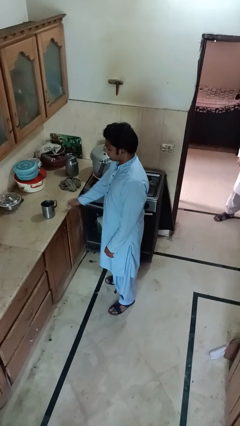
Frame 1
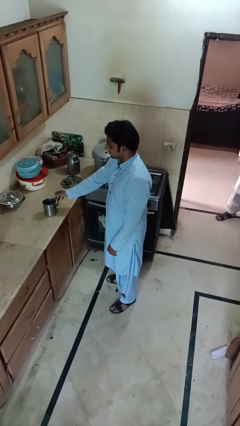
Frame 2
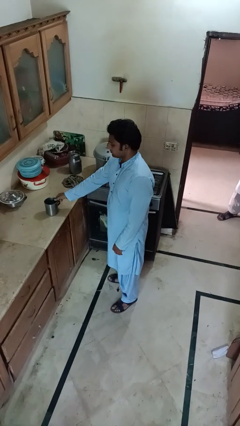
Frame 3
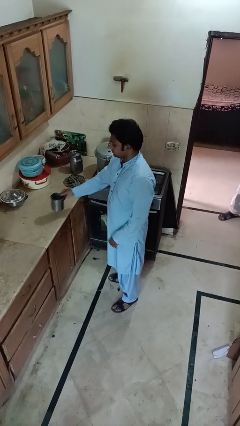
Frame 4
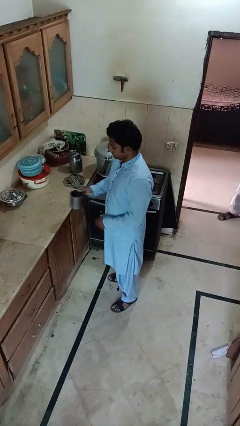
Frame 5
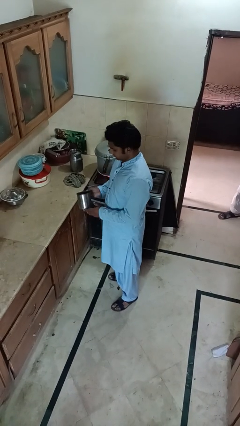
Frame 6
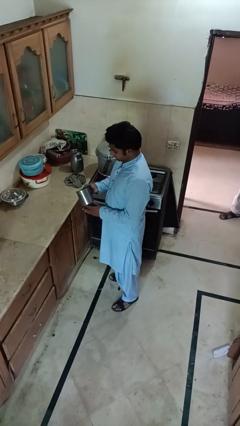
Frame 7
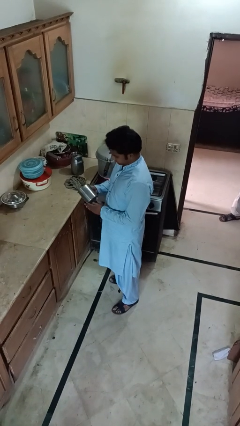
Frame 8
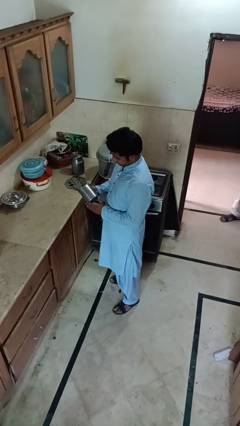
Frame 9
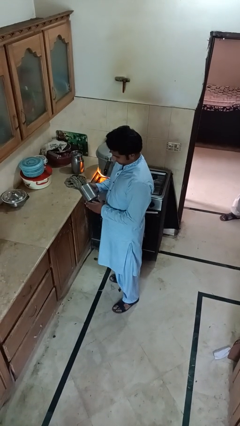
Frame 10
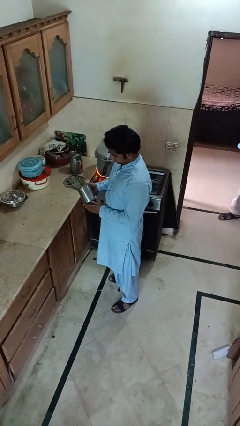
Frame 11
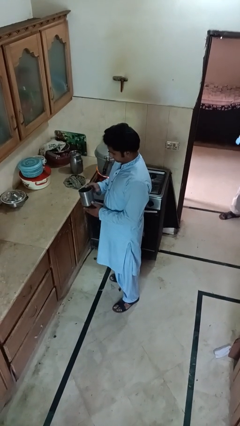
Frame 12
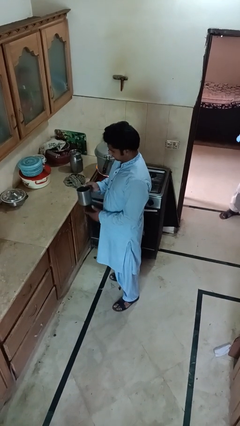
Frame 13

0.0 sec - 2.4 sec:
person picks up object from countertop

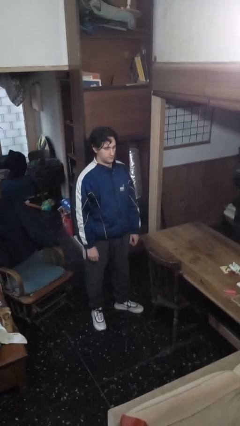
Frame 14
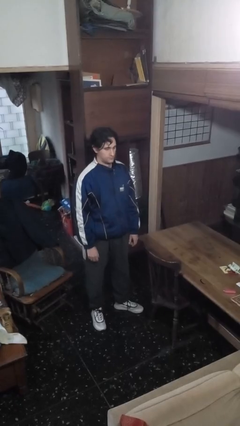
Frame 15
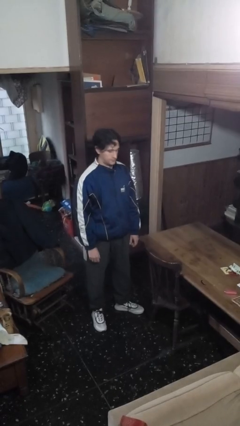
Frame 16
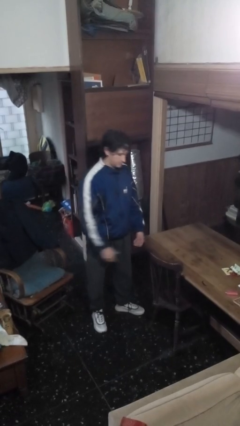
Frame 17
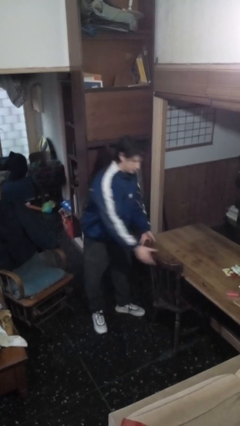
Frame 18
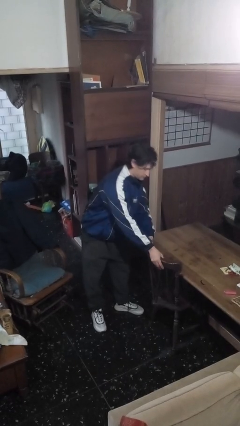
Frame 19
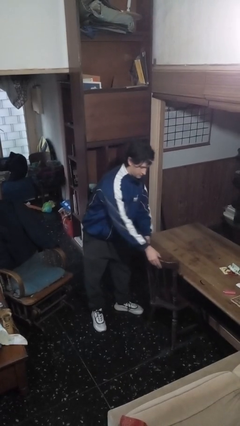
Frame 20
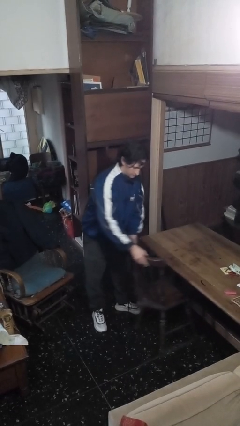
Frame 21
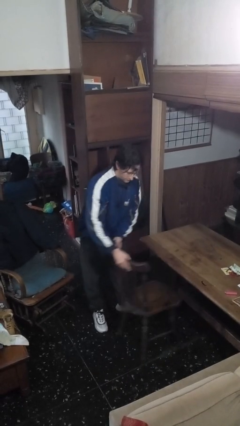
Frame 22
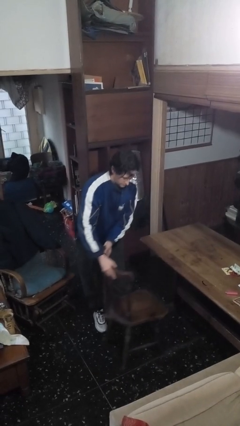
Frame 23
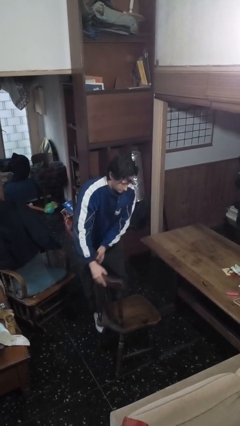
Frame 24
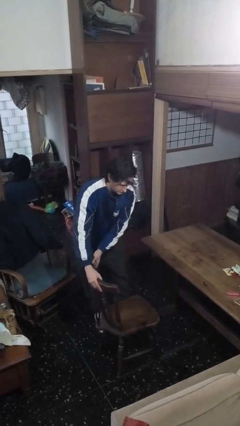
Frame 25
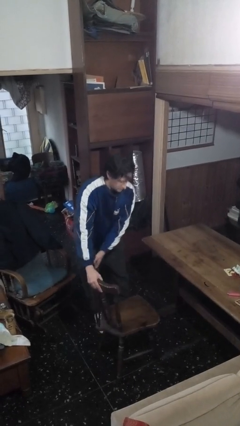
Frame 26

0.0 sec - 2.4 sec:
person pulls out chair

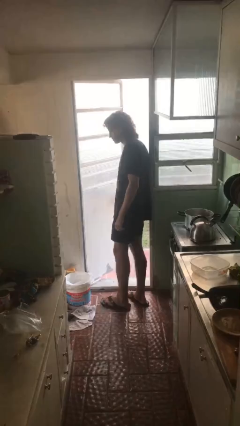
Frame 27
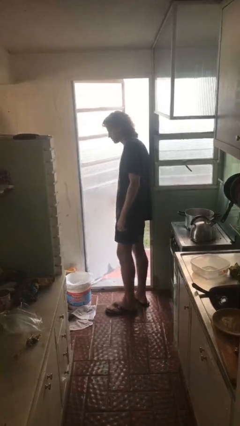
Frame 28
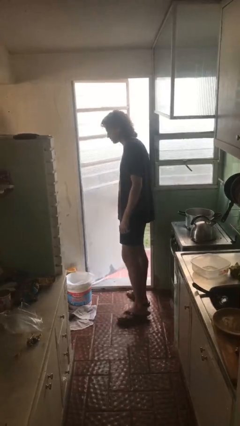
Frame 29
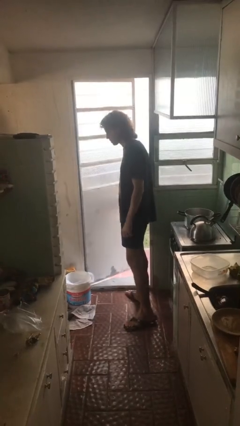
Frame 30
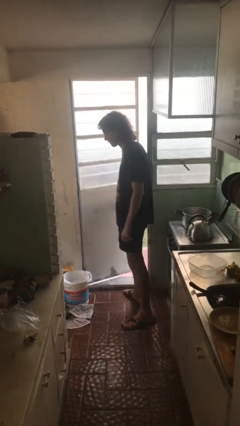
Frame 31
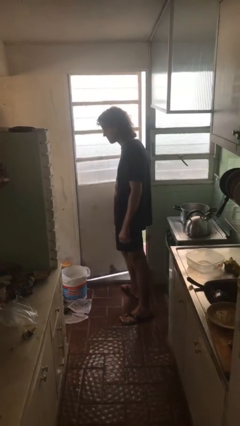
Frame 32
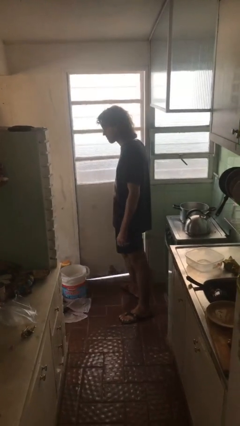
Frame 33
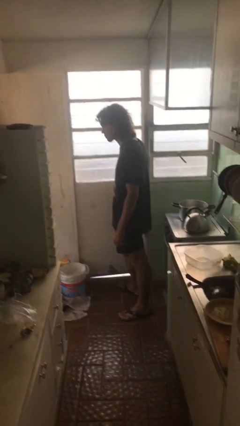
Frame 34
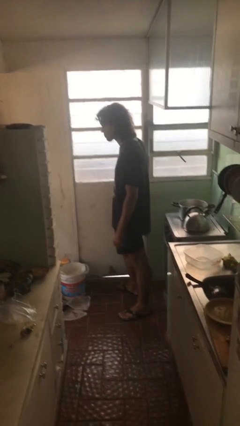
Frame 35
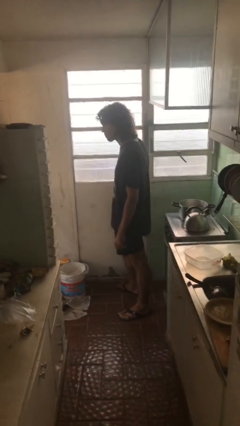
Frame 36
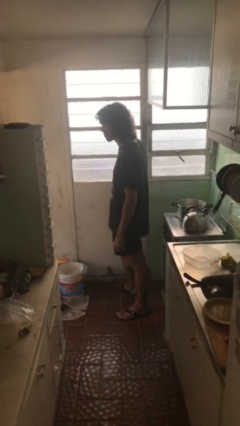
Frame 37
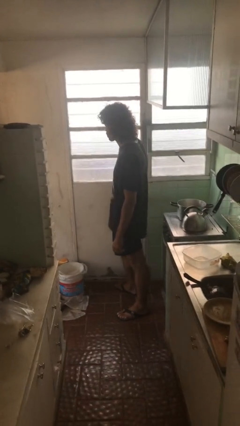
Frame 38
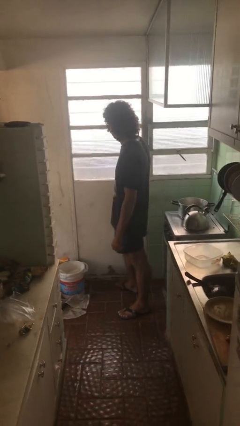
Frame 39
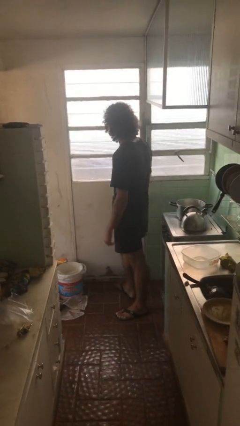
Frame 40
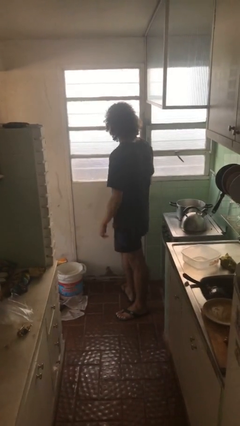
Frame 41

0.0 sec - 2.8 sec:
person closes facility door

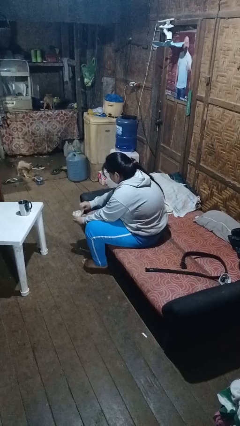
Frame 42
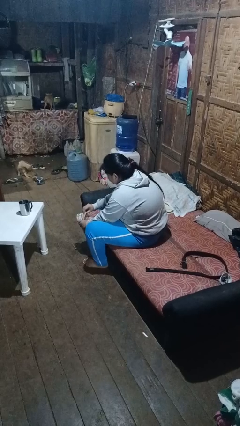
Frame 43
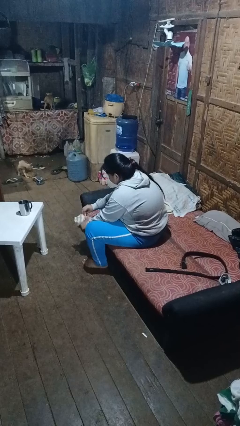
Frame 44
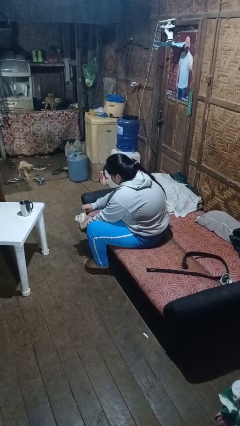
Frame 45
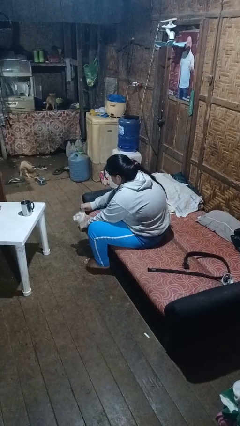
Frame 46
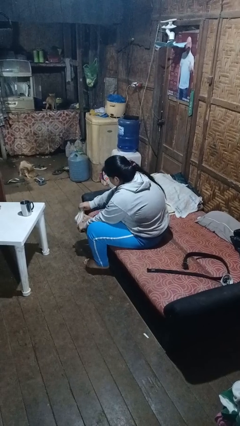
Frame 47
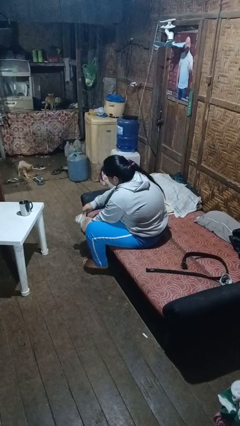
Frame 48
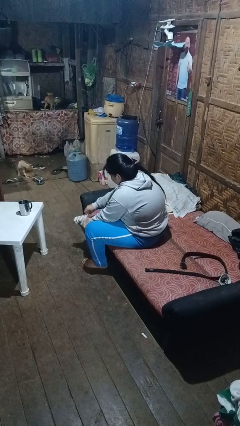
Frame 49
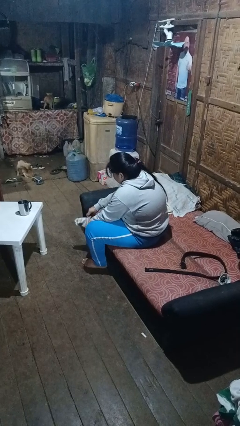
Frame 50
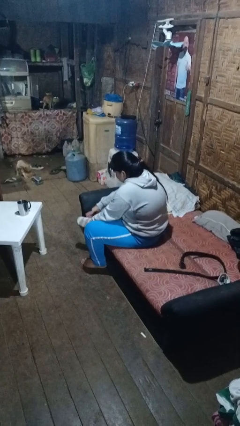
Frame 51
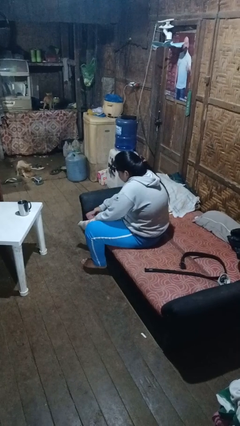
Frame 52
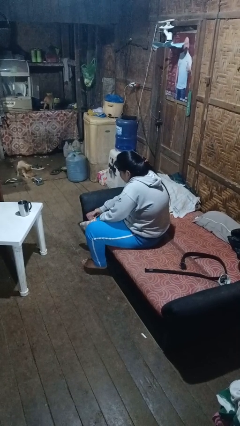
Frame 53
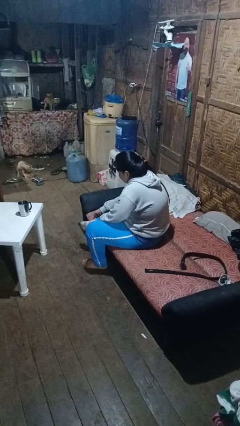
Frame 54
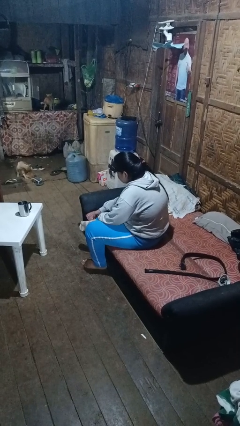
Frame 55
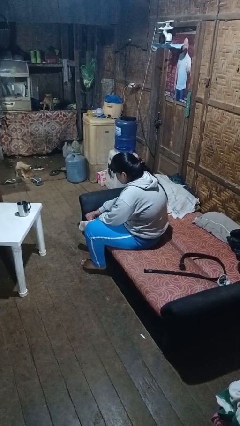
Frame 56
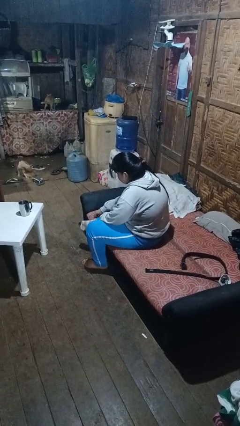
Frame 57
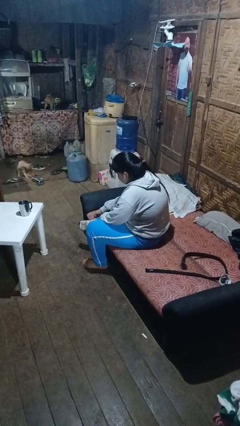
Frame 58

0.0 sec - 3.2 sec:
person puts on socks

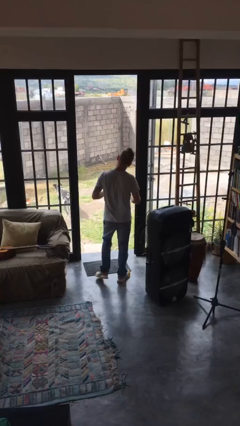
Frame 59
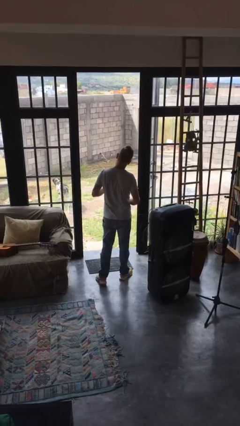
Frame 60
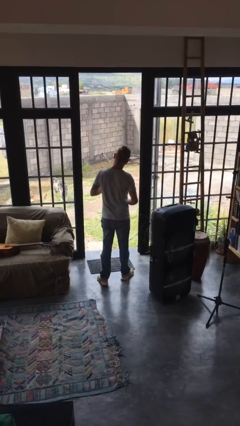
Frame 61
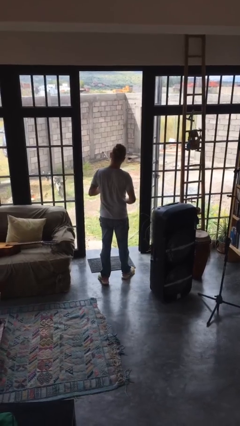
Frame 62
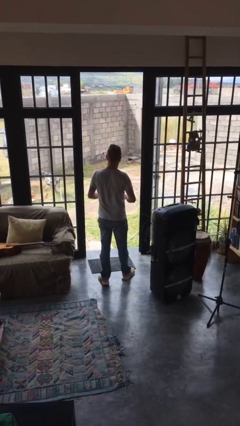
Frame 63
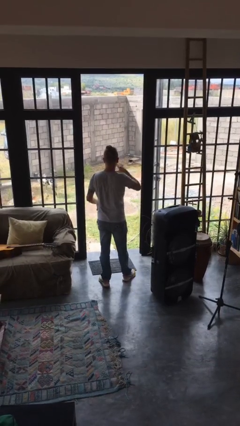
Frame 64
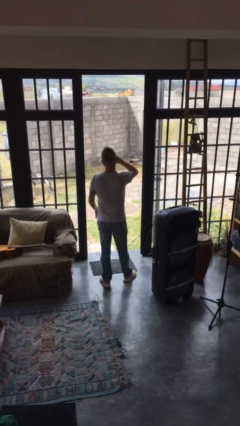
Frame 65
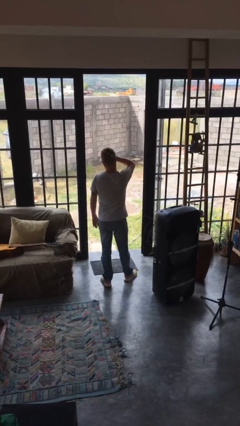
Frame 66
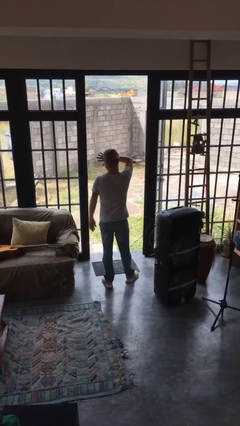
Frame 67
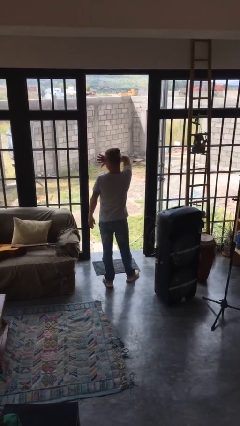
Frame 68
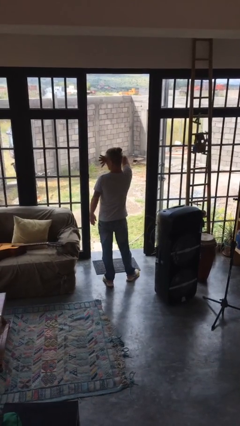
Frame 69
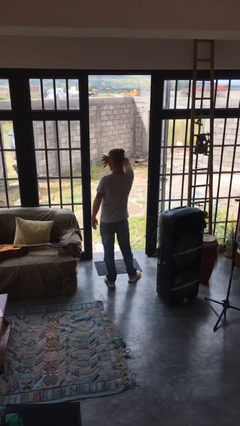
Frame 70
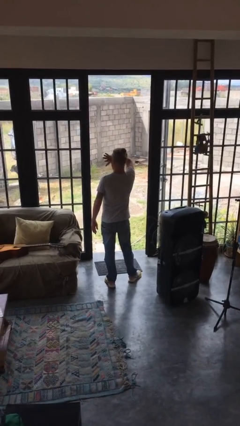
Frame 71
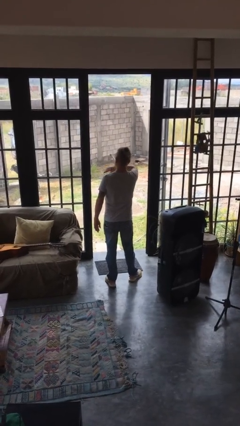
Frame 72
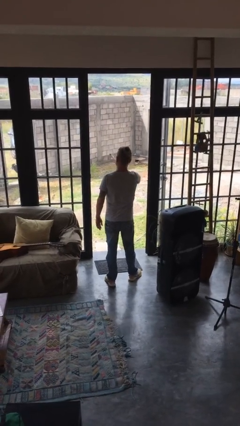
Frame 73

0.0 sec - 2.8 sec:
person shades eyes

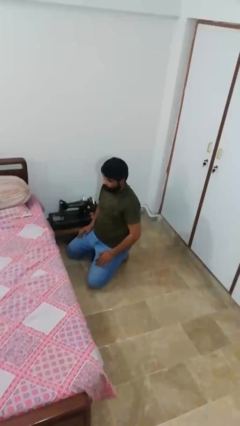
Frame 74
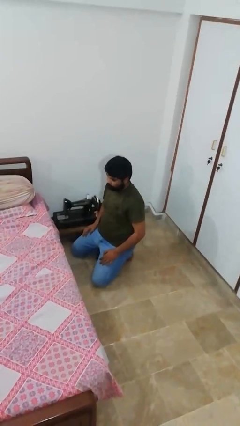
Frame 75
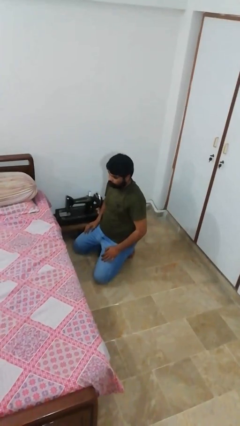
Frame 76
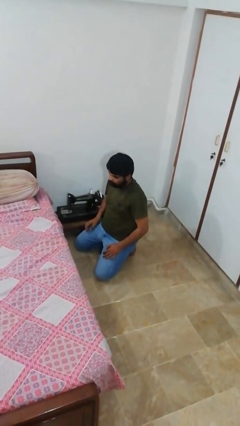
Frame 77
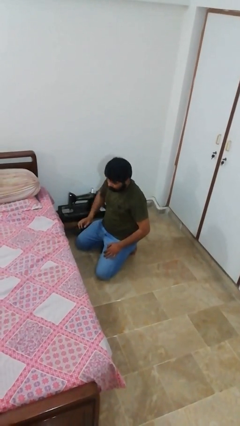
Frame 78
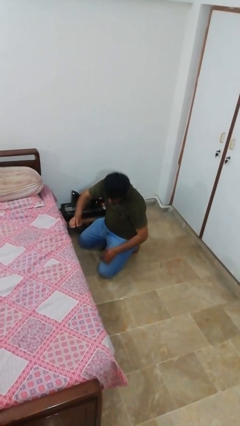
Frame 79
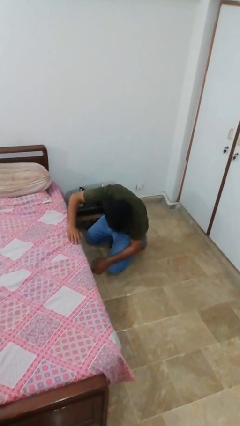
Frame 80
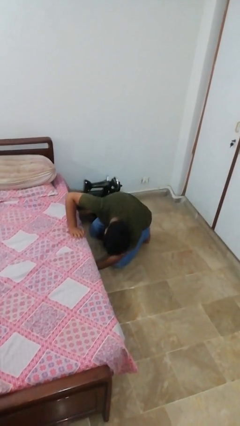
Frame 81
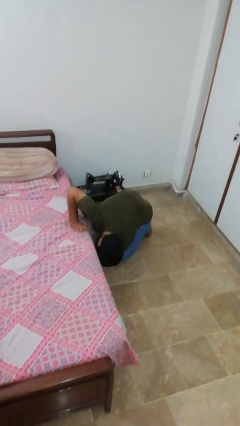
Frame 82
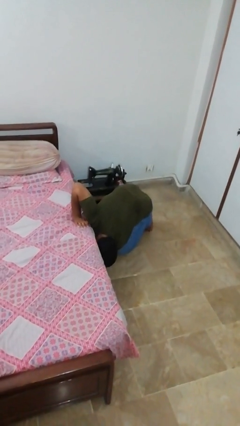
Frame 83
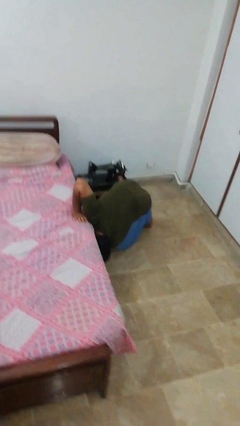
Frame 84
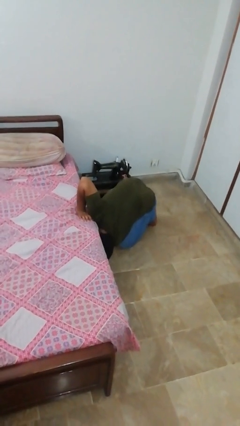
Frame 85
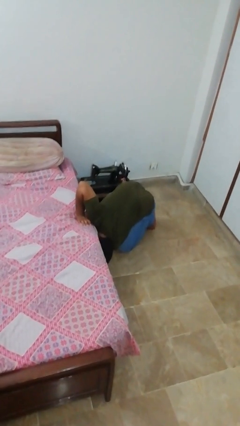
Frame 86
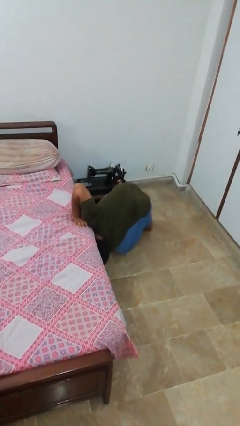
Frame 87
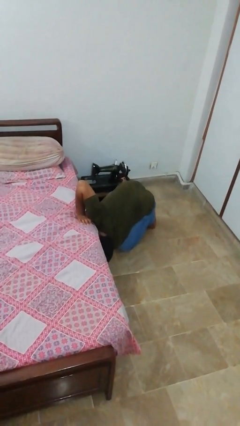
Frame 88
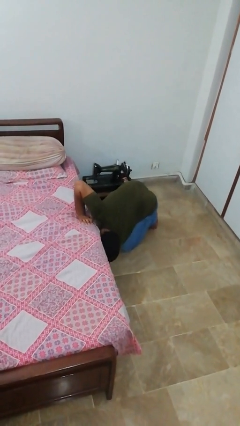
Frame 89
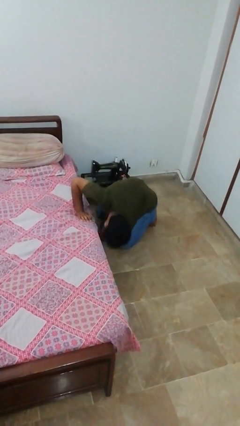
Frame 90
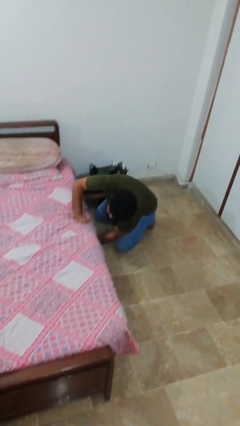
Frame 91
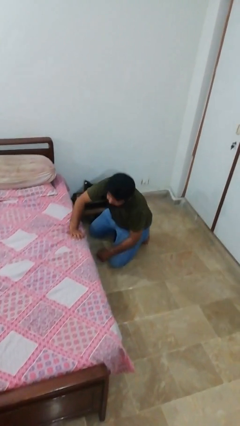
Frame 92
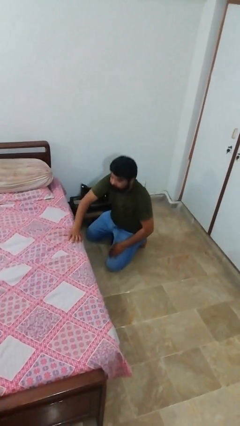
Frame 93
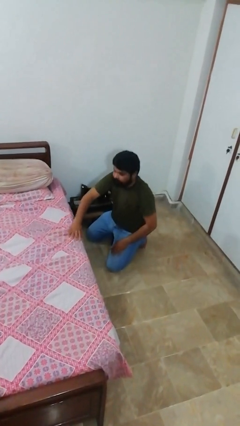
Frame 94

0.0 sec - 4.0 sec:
person searches under bed
